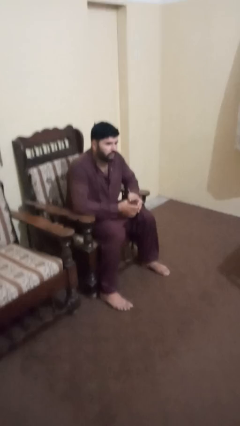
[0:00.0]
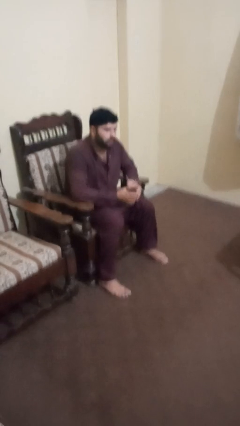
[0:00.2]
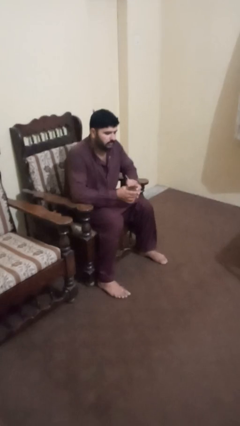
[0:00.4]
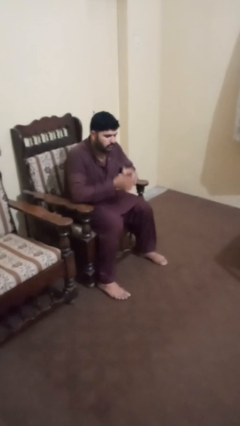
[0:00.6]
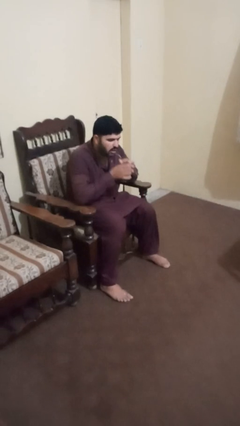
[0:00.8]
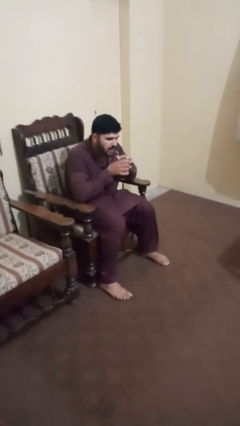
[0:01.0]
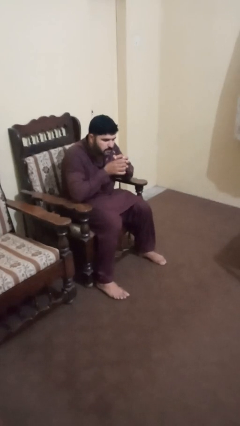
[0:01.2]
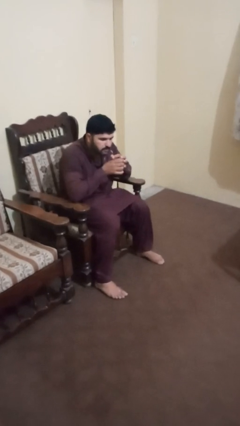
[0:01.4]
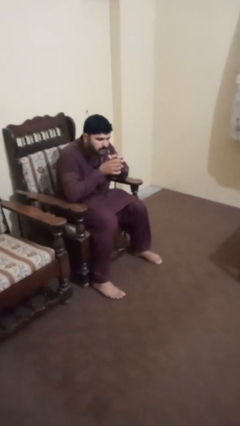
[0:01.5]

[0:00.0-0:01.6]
person drinks from straw

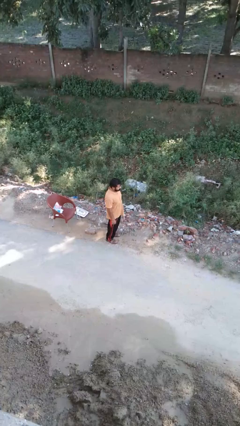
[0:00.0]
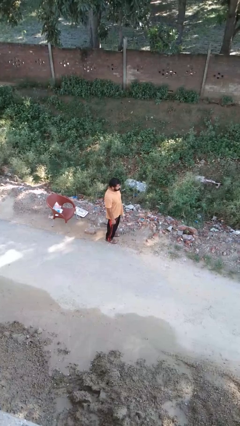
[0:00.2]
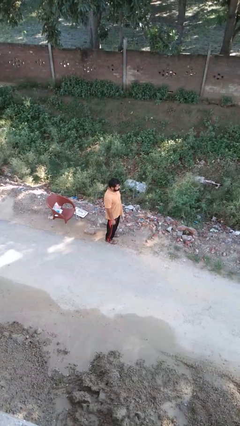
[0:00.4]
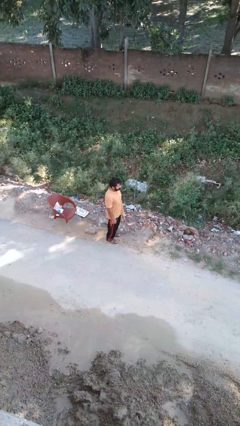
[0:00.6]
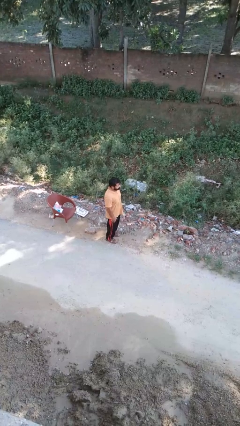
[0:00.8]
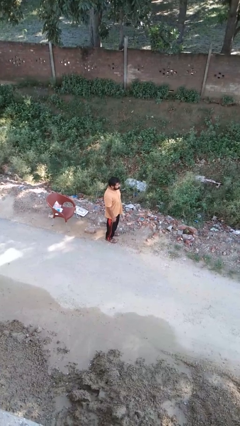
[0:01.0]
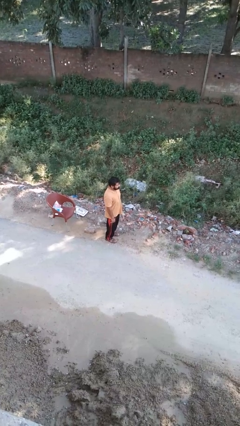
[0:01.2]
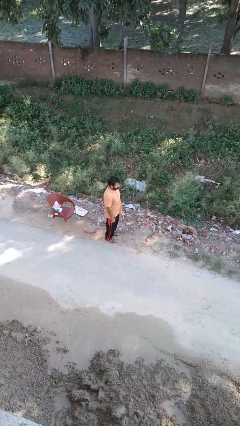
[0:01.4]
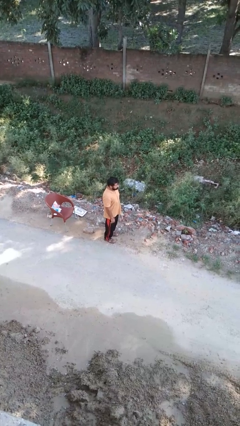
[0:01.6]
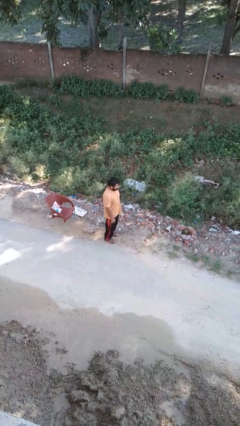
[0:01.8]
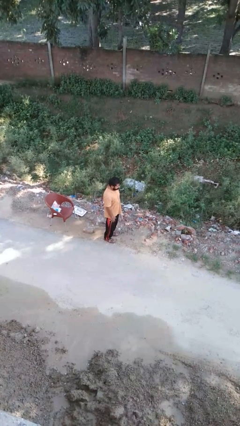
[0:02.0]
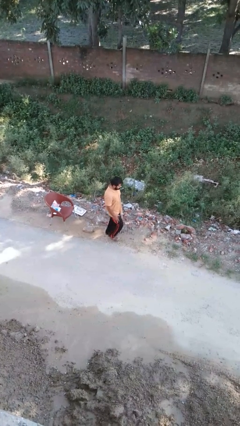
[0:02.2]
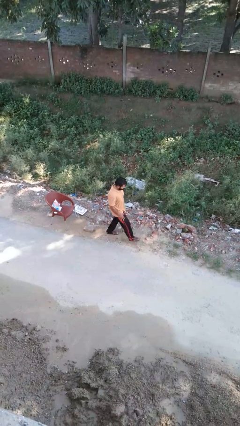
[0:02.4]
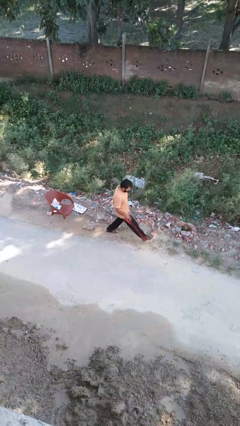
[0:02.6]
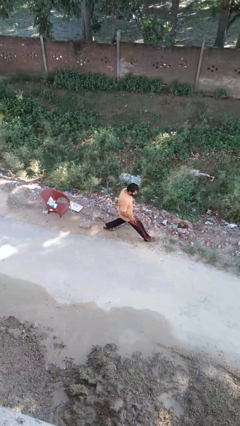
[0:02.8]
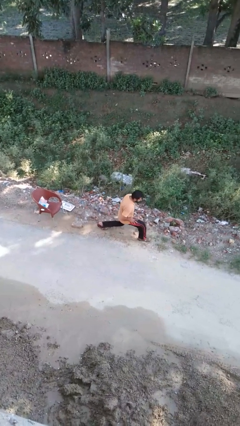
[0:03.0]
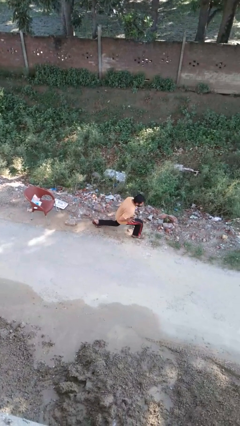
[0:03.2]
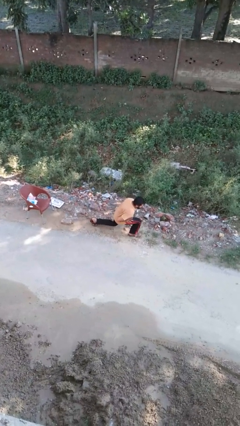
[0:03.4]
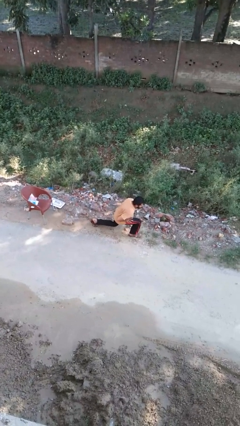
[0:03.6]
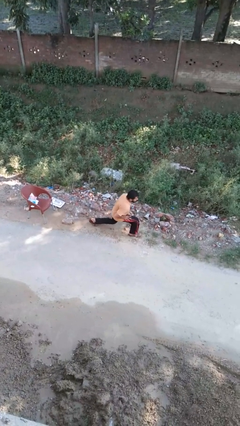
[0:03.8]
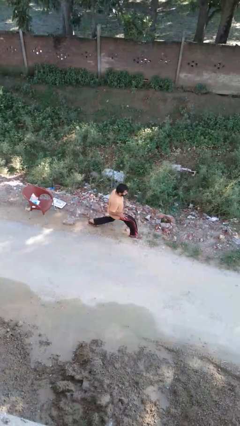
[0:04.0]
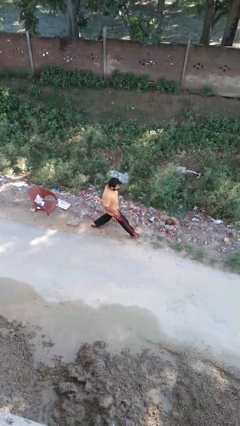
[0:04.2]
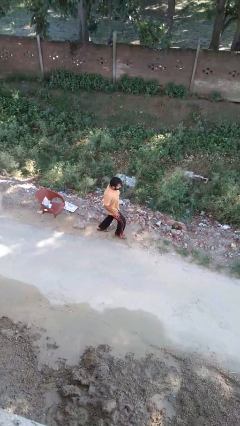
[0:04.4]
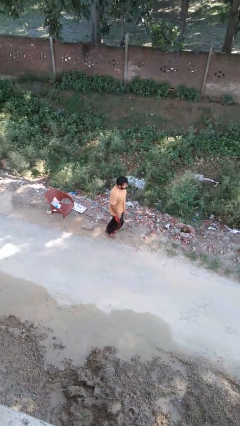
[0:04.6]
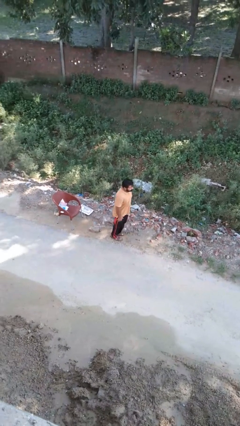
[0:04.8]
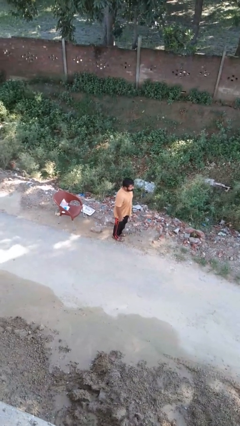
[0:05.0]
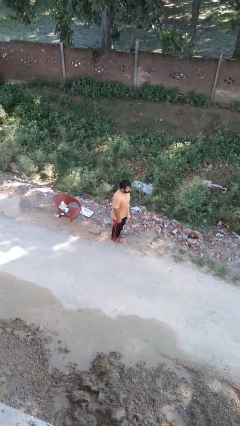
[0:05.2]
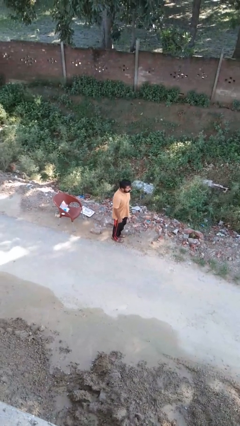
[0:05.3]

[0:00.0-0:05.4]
person exercises with lunges

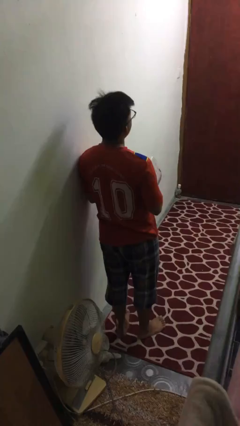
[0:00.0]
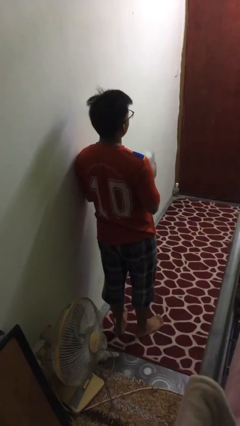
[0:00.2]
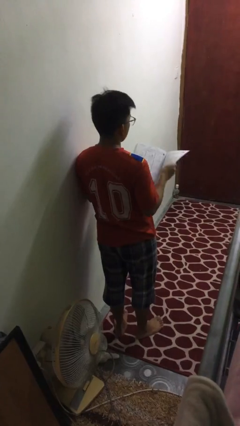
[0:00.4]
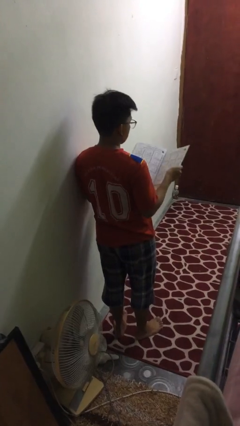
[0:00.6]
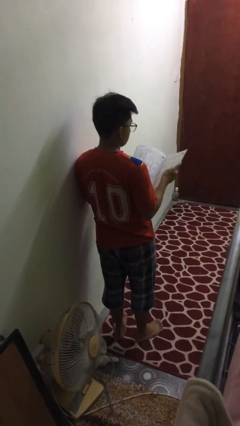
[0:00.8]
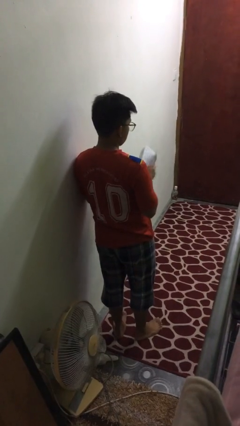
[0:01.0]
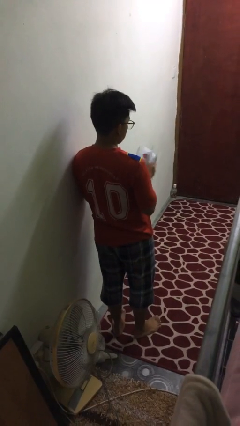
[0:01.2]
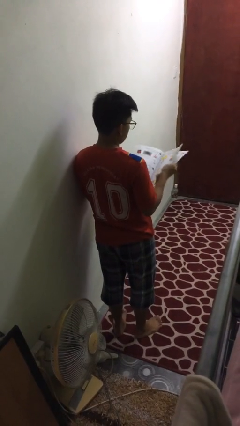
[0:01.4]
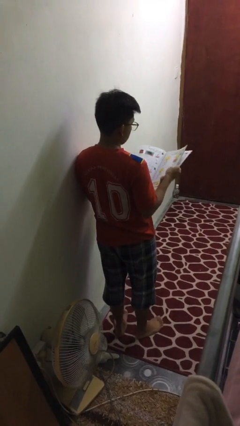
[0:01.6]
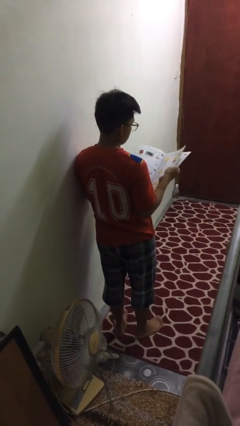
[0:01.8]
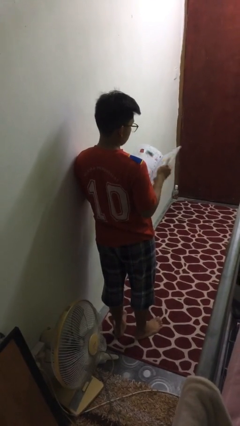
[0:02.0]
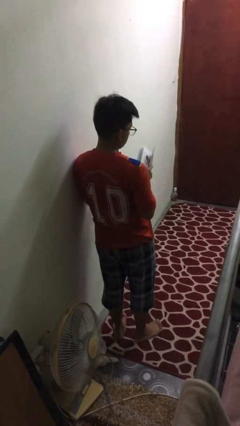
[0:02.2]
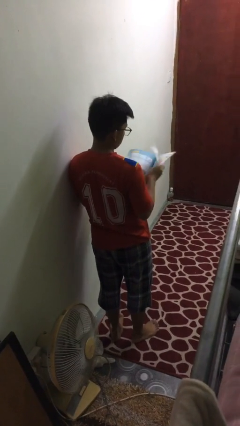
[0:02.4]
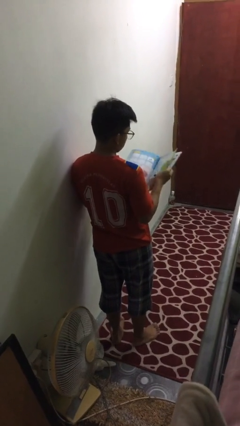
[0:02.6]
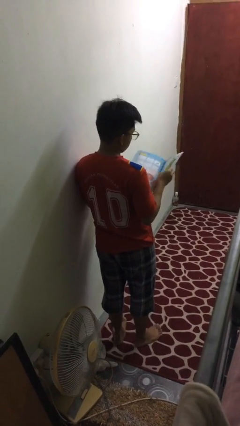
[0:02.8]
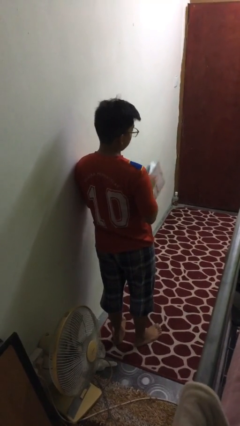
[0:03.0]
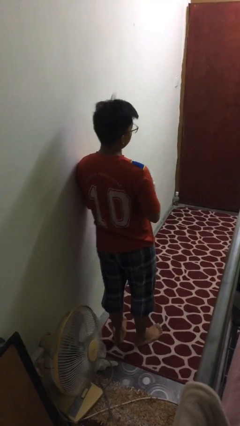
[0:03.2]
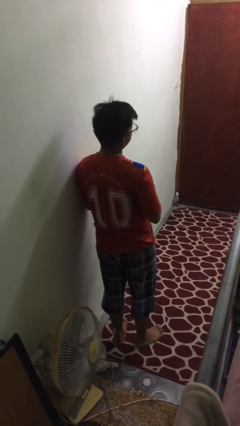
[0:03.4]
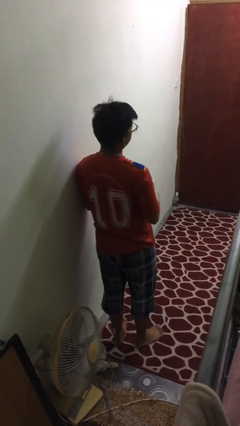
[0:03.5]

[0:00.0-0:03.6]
person reads magazine

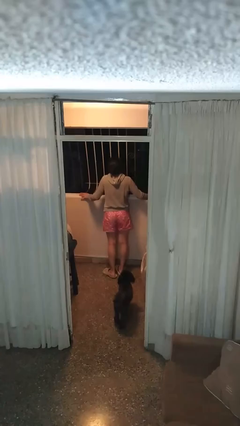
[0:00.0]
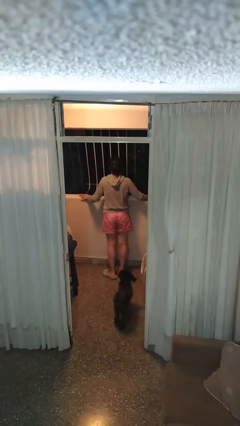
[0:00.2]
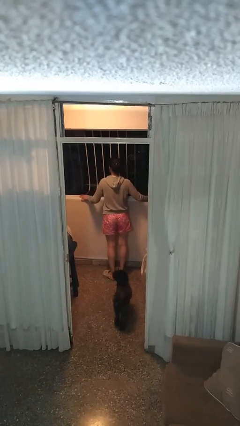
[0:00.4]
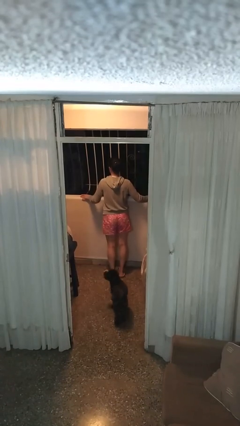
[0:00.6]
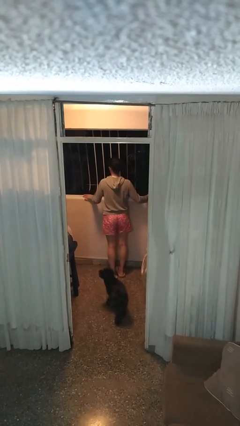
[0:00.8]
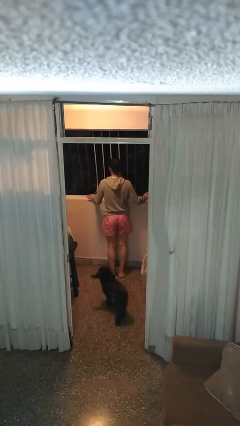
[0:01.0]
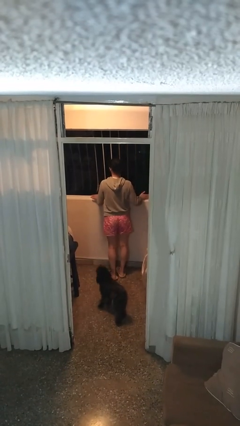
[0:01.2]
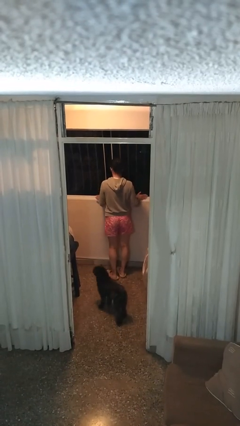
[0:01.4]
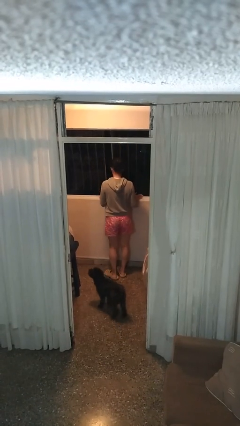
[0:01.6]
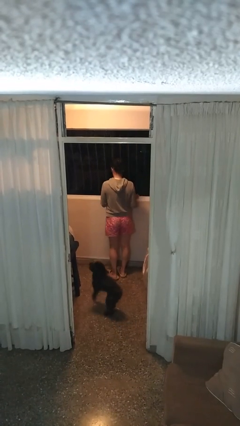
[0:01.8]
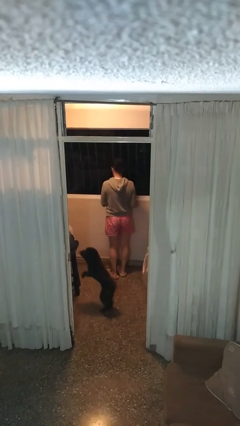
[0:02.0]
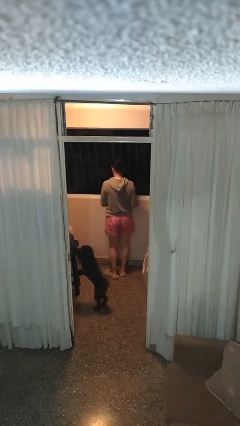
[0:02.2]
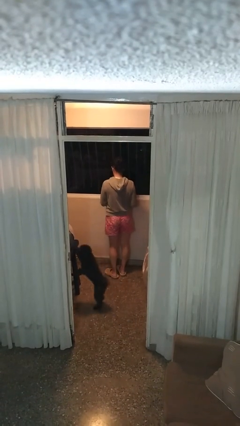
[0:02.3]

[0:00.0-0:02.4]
person closes home window

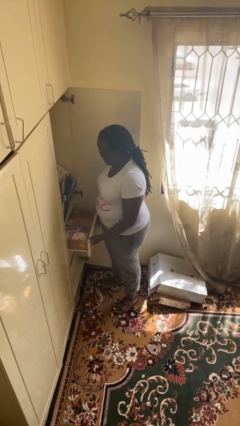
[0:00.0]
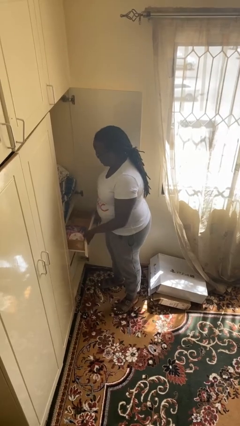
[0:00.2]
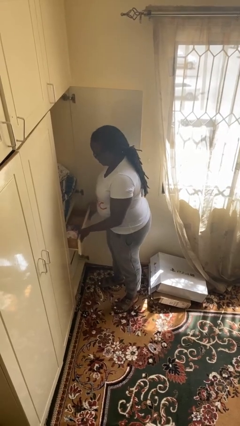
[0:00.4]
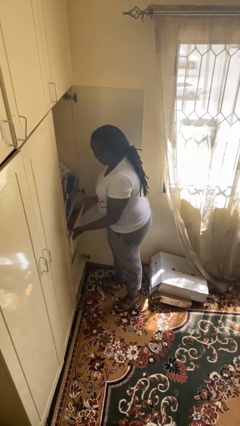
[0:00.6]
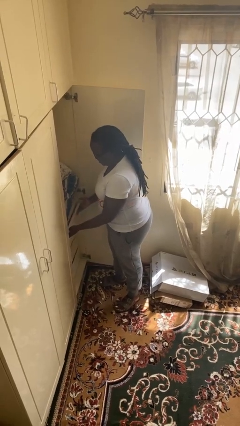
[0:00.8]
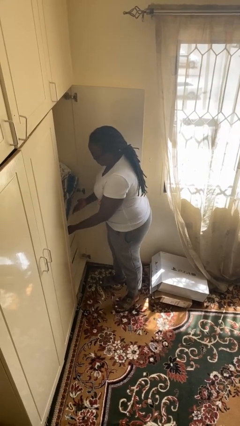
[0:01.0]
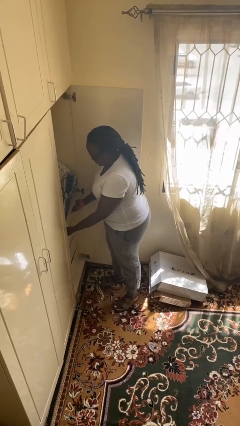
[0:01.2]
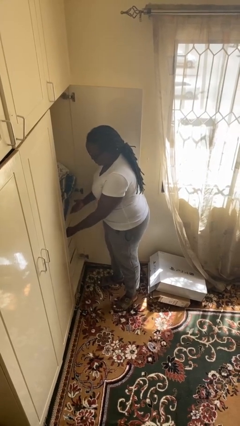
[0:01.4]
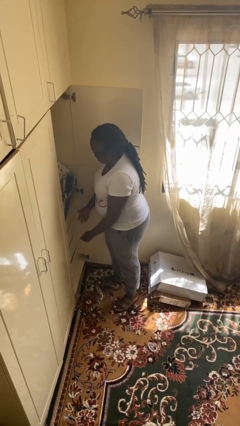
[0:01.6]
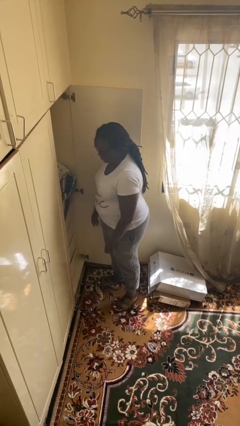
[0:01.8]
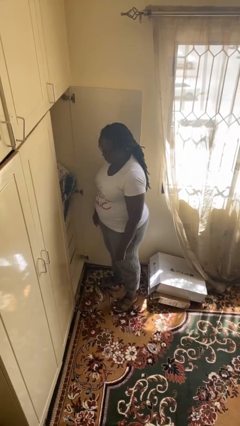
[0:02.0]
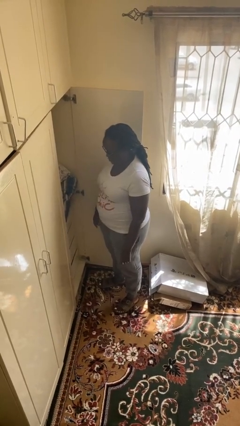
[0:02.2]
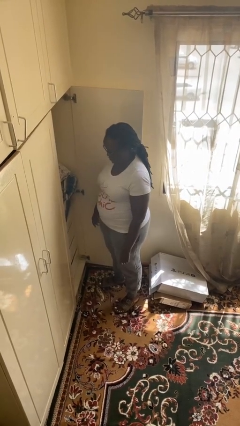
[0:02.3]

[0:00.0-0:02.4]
person closes dresser drawer

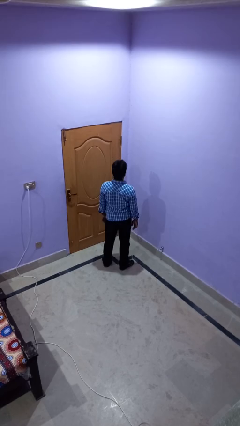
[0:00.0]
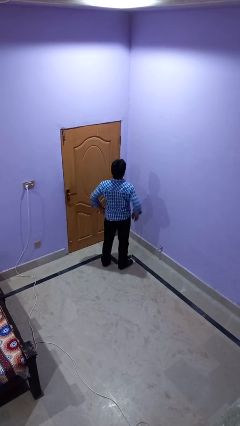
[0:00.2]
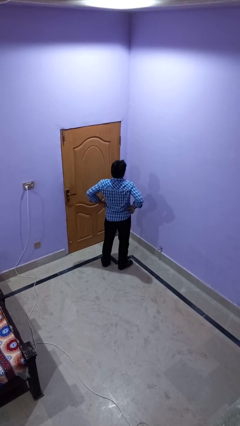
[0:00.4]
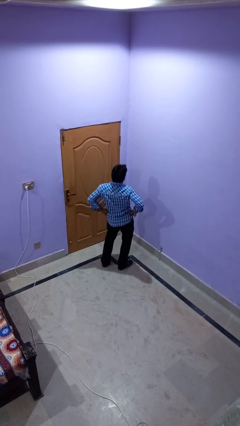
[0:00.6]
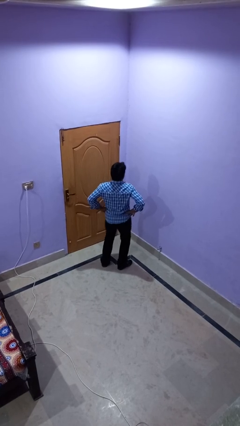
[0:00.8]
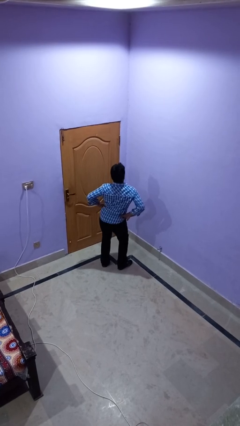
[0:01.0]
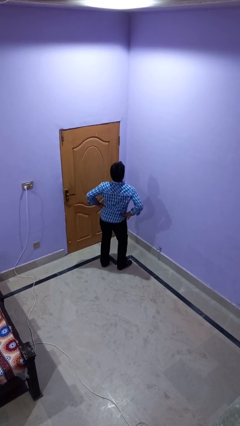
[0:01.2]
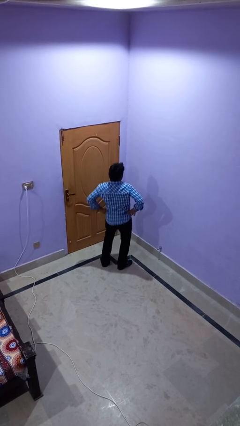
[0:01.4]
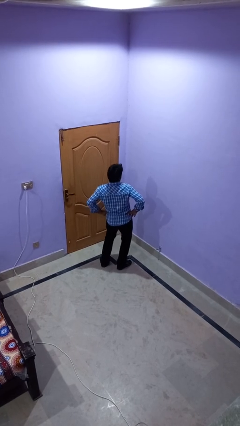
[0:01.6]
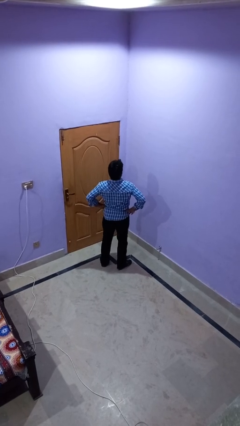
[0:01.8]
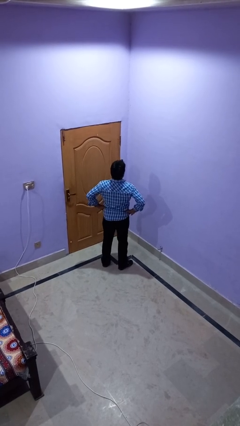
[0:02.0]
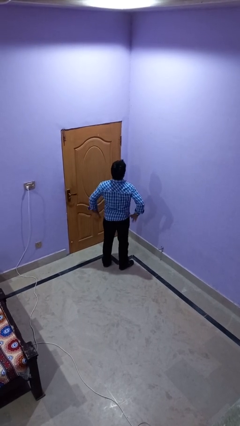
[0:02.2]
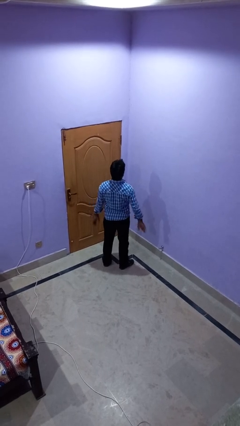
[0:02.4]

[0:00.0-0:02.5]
person dances in place
